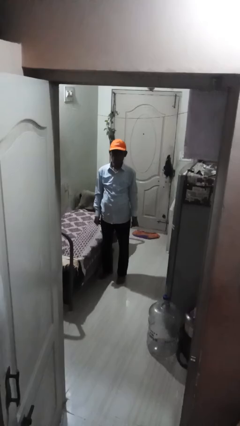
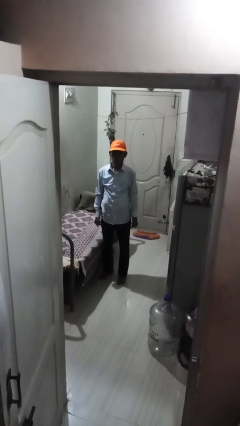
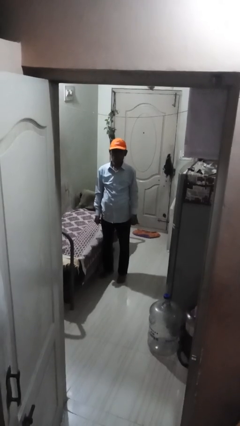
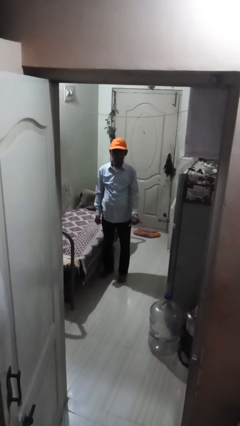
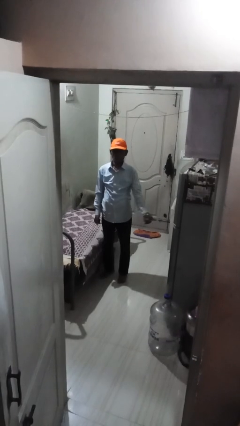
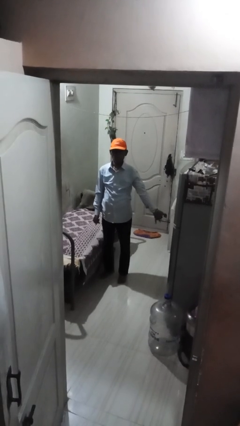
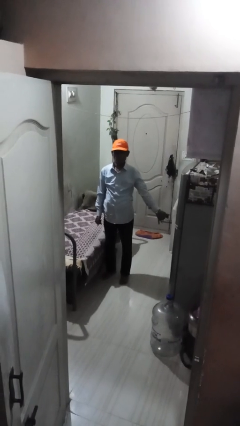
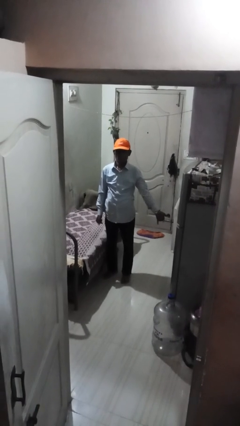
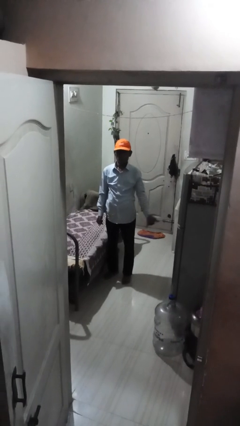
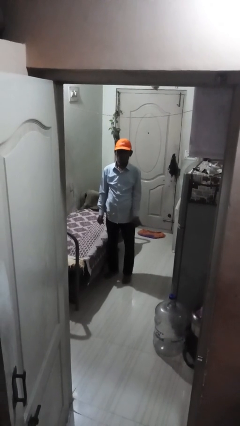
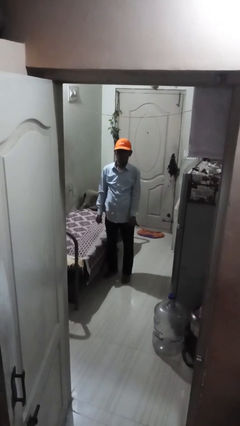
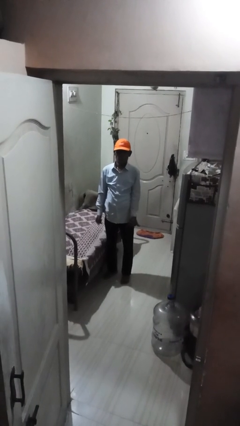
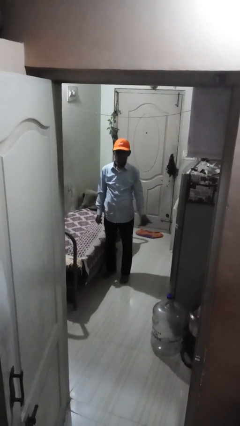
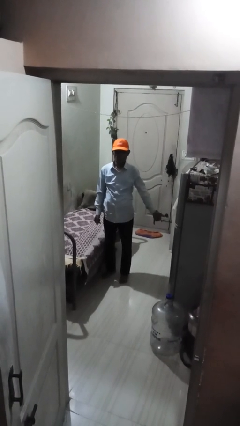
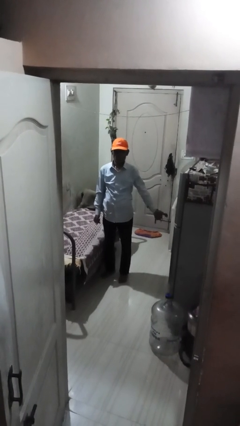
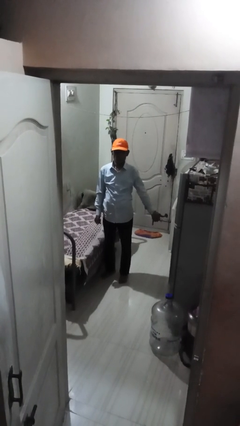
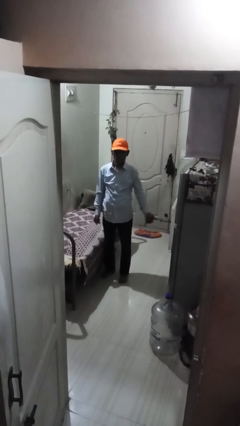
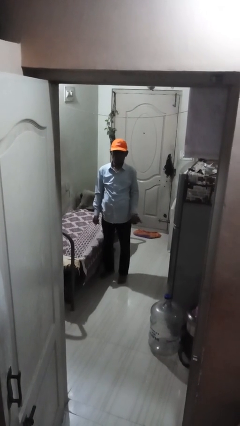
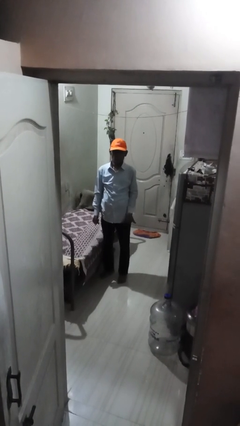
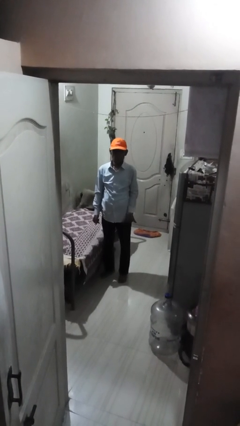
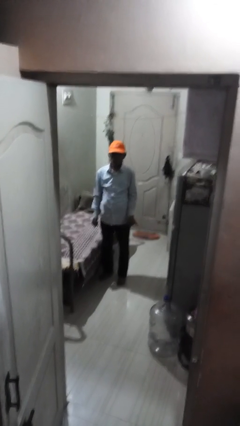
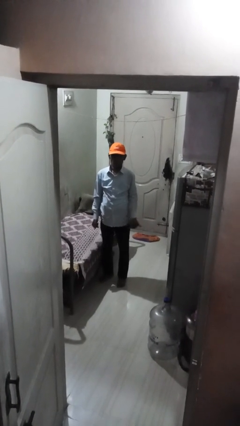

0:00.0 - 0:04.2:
person gestures hang loose

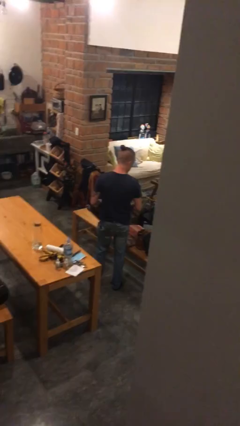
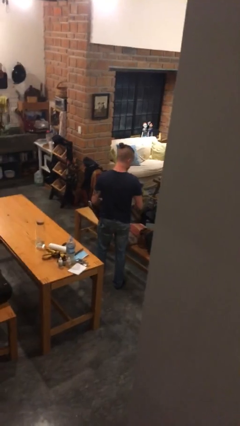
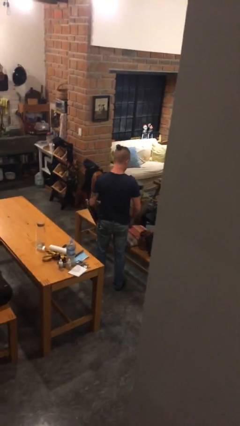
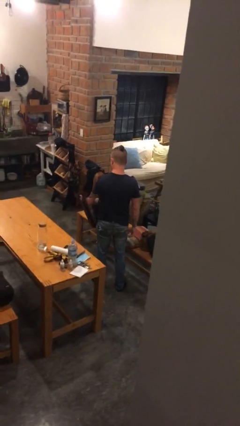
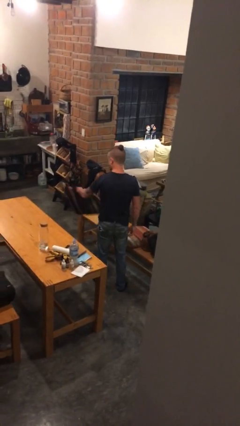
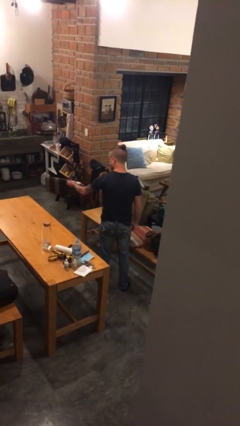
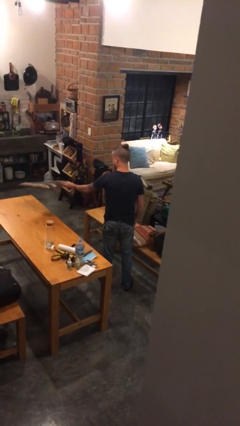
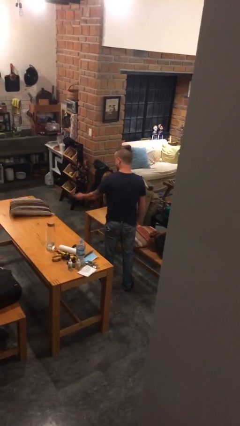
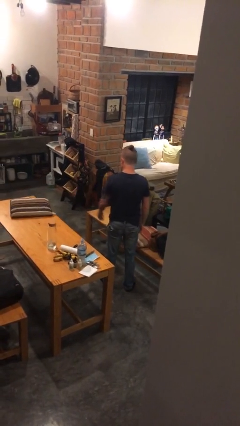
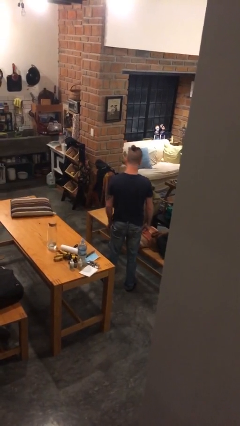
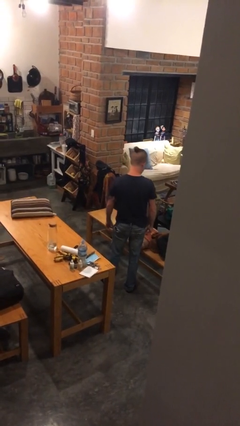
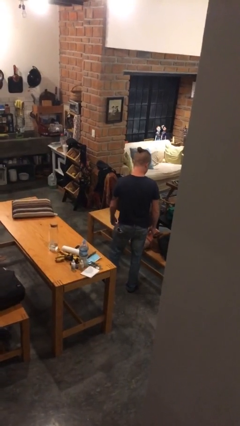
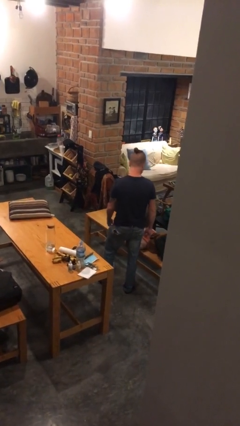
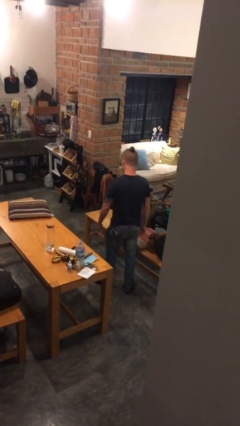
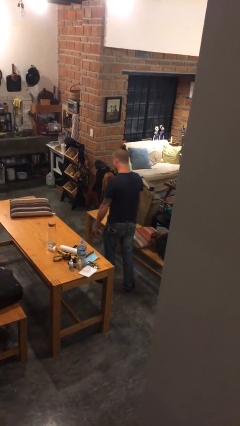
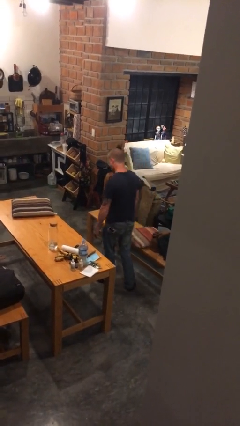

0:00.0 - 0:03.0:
person throws object on table

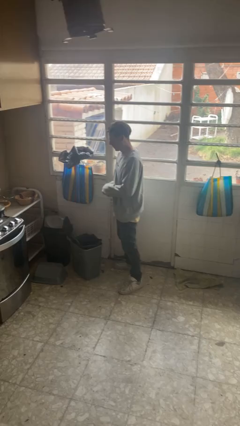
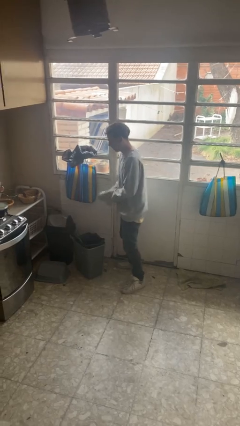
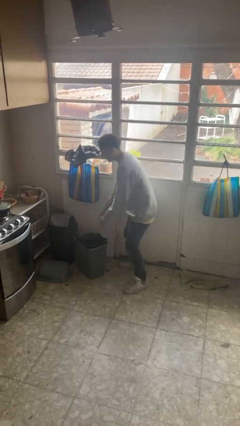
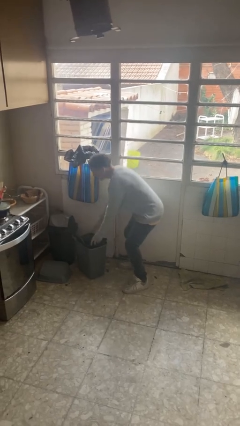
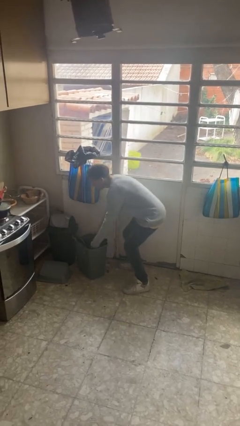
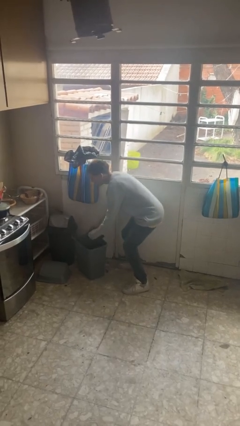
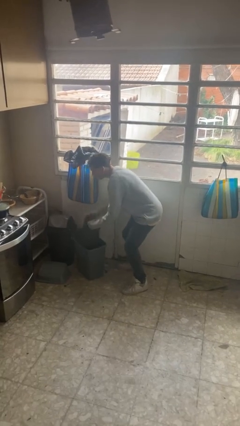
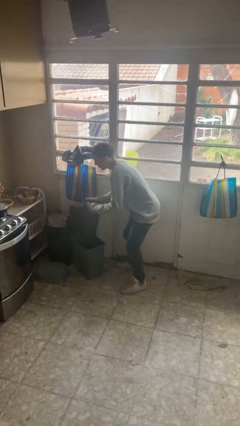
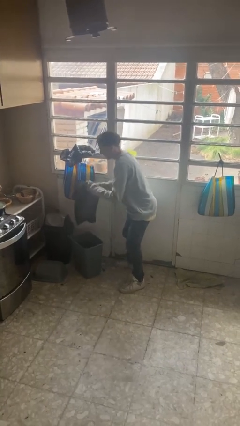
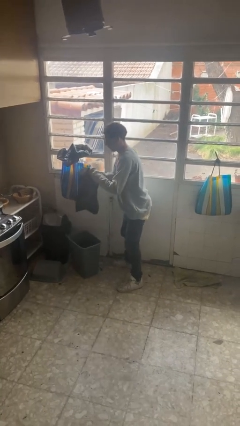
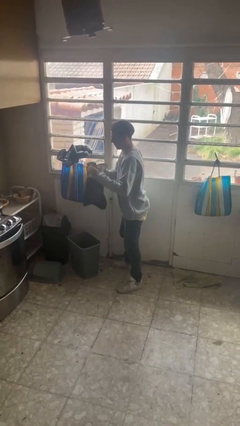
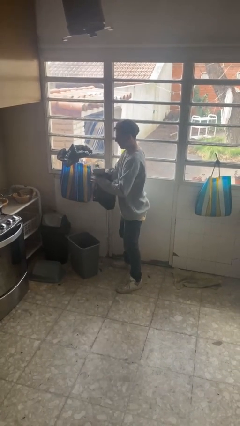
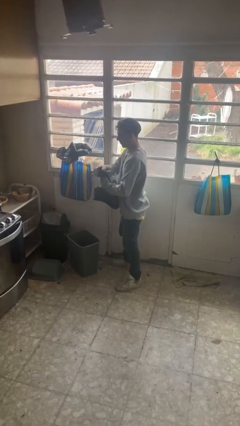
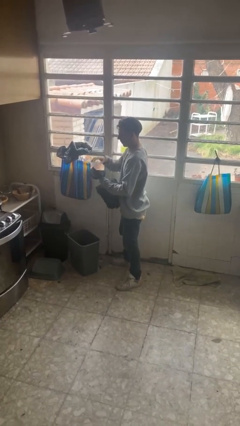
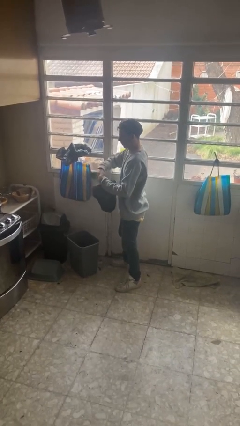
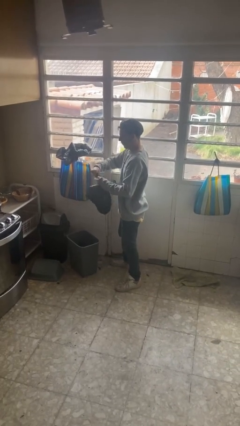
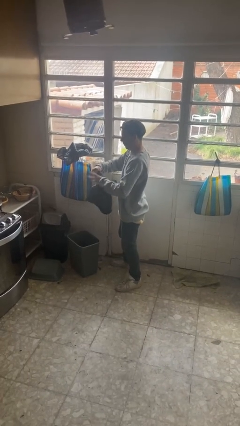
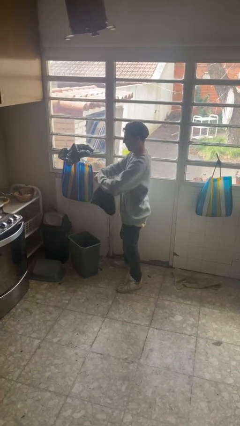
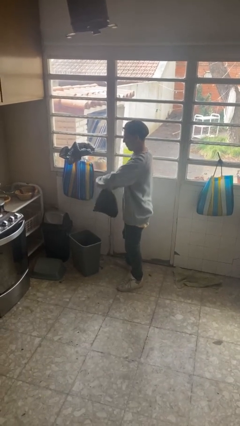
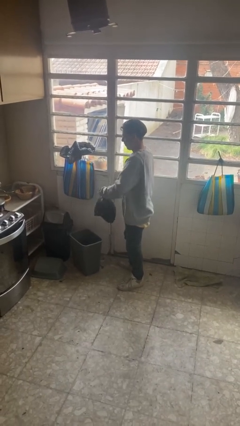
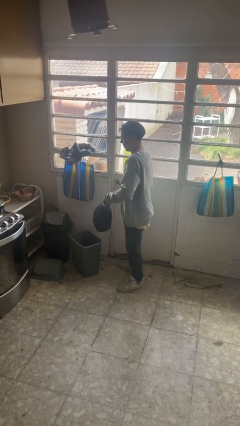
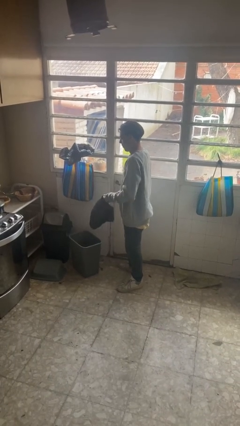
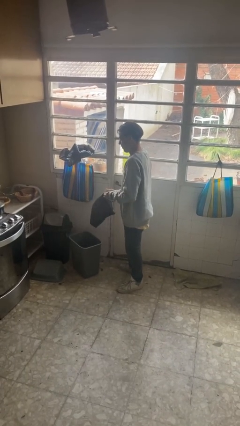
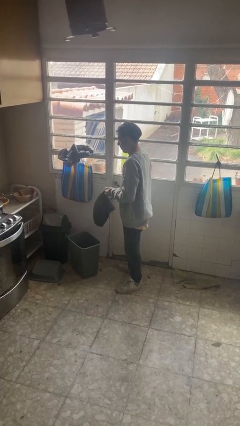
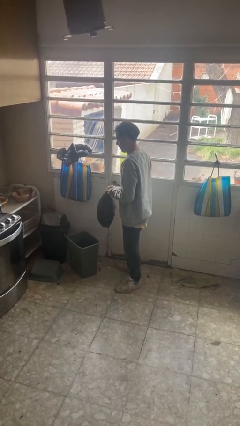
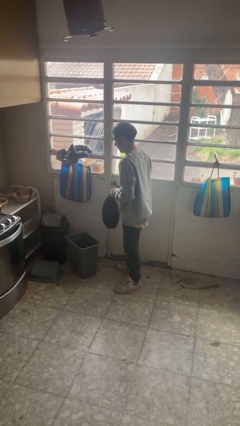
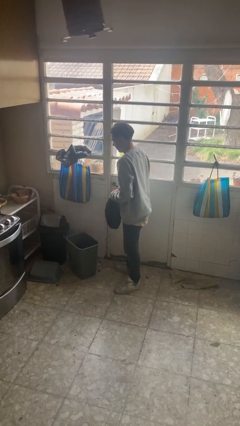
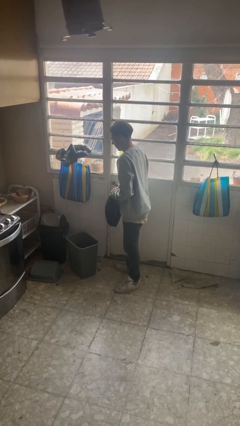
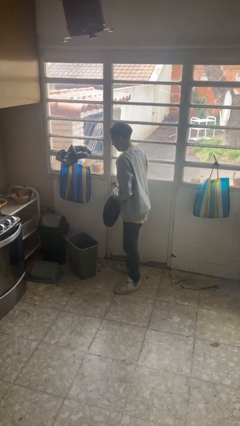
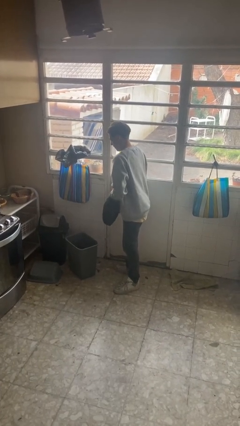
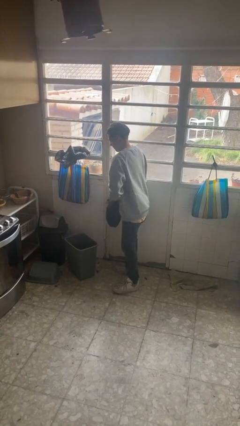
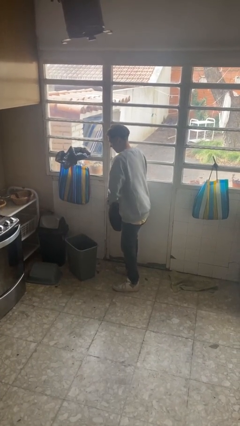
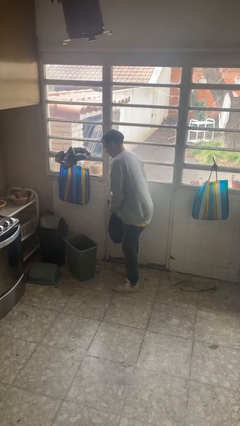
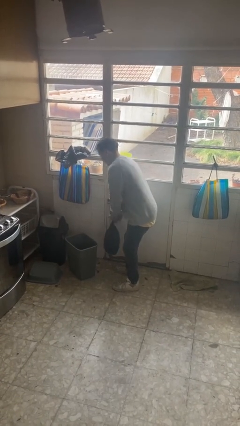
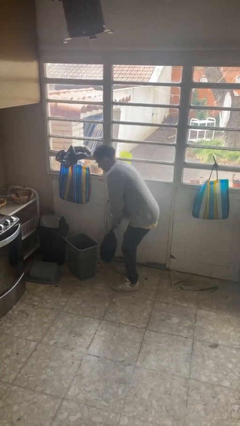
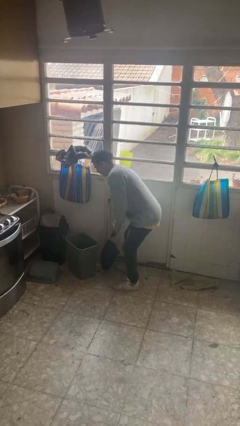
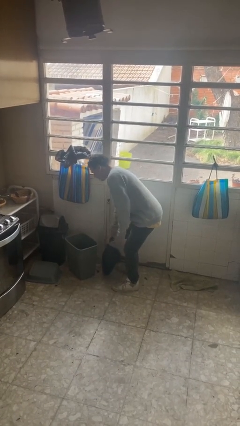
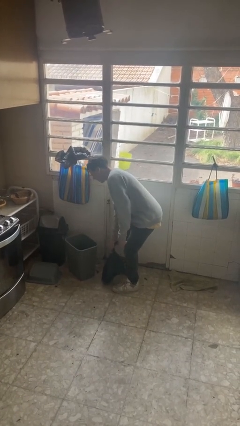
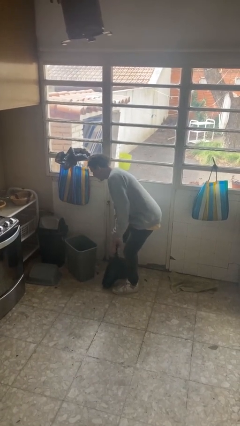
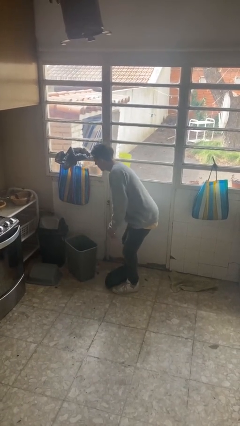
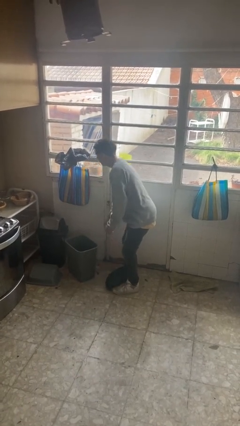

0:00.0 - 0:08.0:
person removes trashbag from trashcan

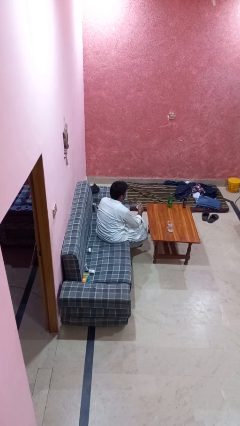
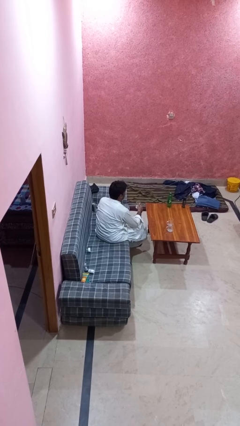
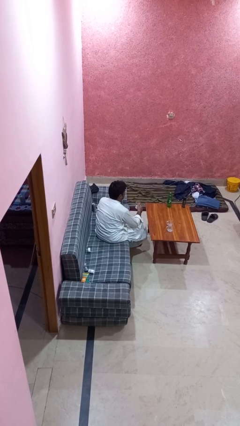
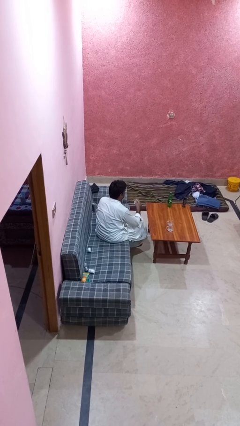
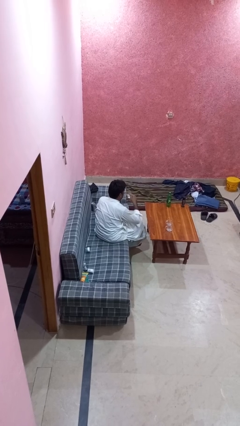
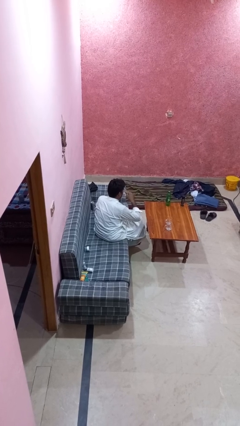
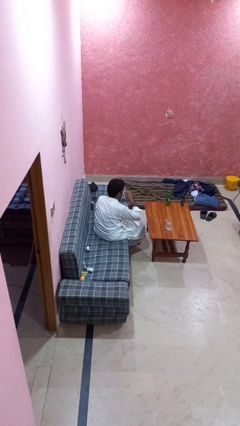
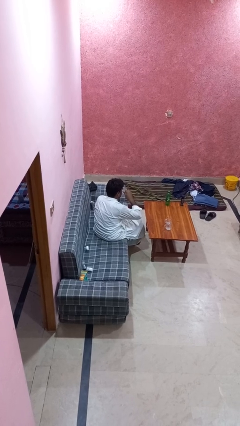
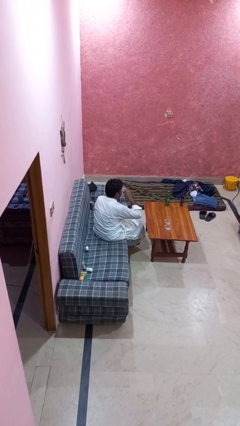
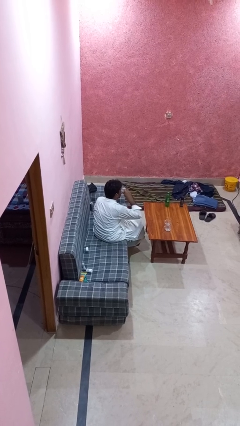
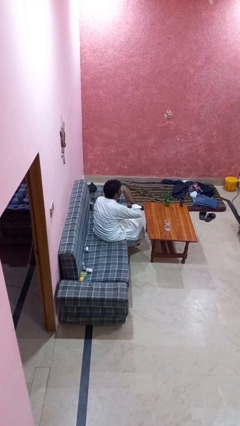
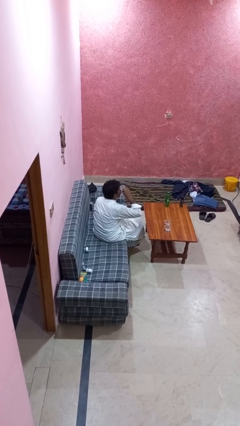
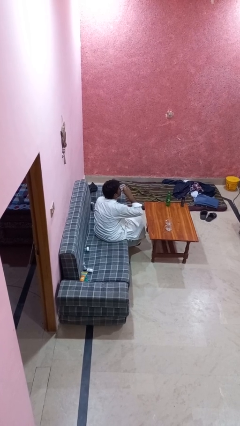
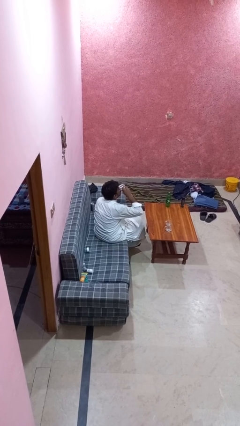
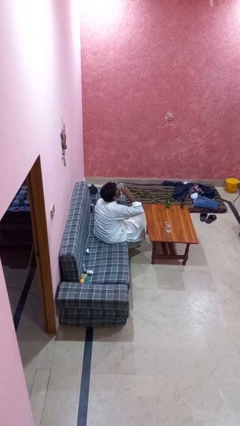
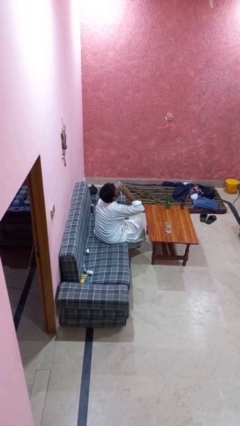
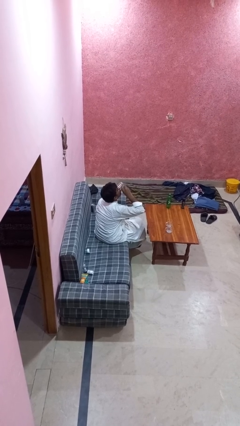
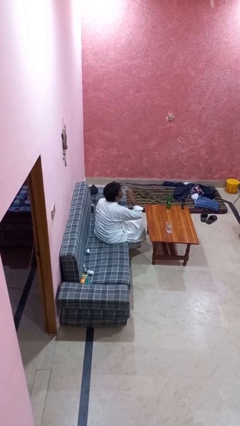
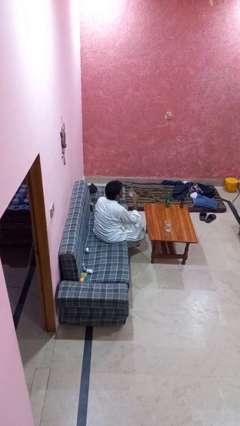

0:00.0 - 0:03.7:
person drinks from shotglass
